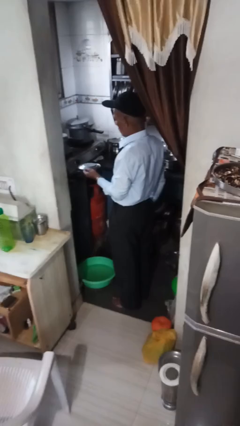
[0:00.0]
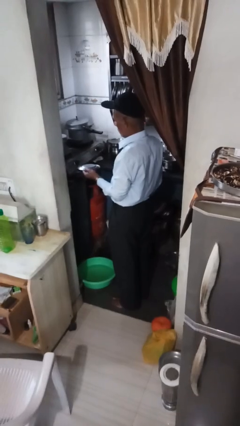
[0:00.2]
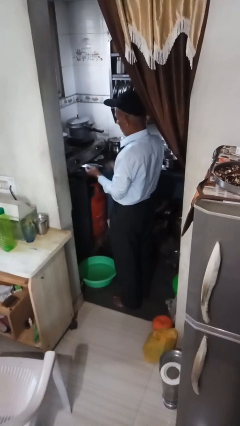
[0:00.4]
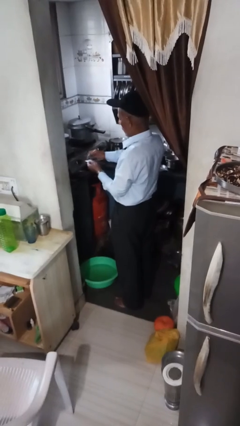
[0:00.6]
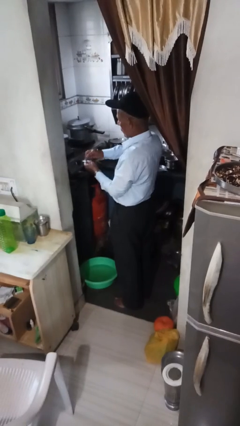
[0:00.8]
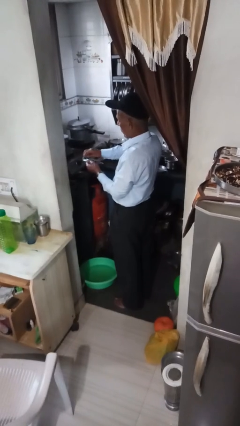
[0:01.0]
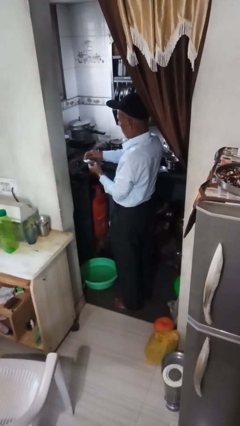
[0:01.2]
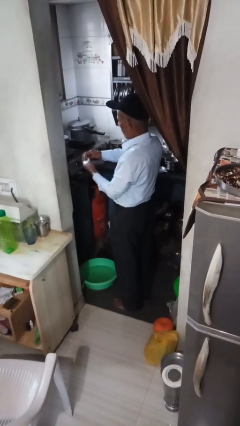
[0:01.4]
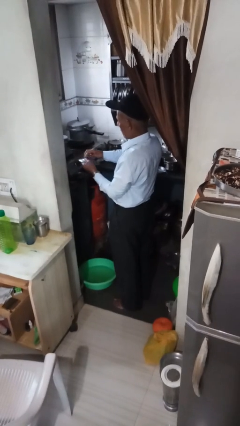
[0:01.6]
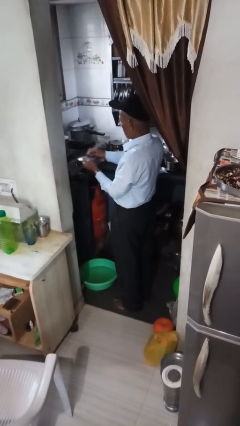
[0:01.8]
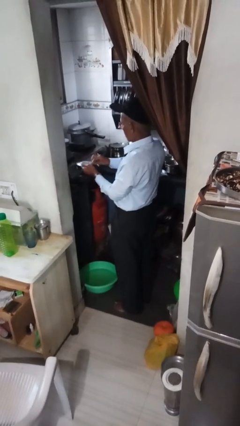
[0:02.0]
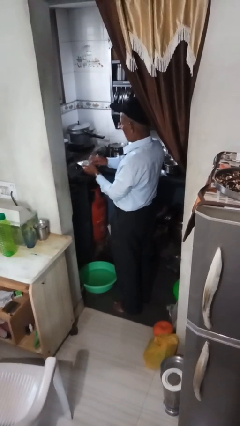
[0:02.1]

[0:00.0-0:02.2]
person washes dish

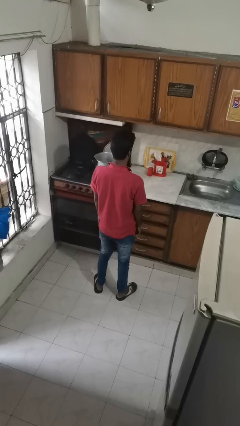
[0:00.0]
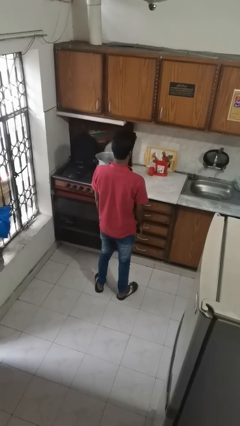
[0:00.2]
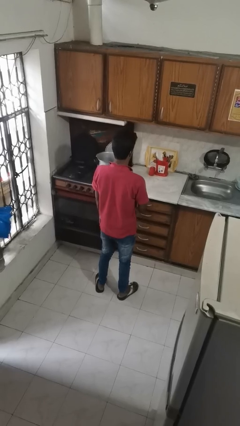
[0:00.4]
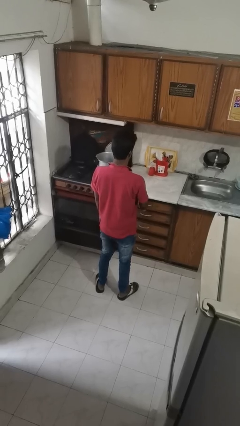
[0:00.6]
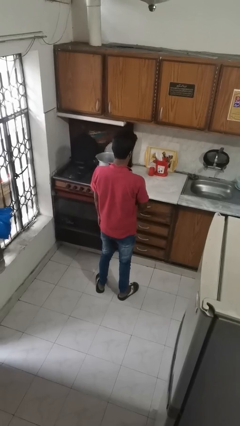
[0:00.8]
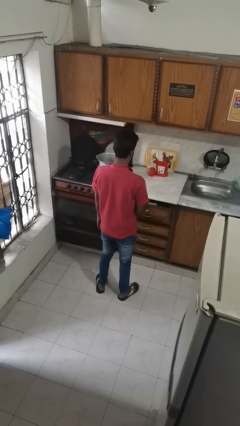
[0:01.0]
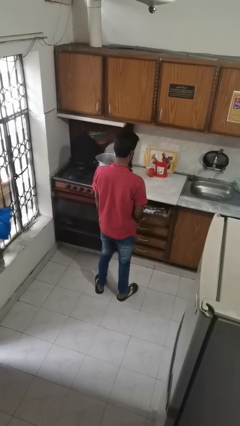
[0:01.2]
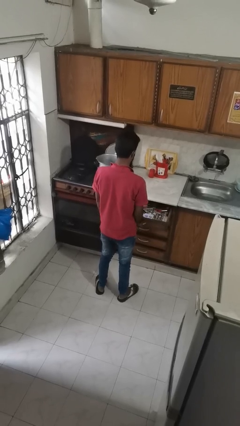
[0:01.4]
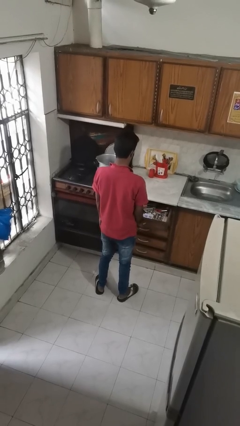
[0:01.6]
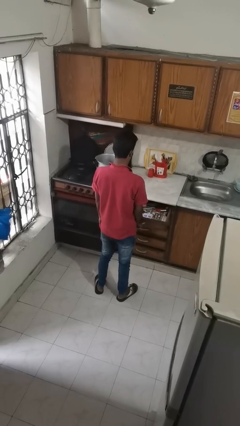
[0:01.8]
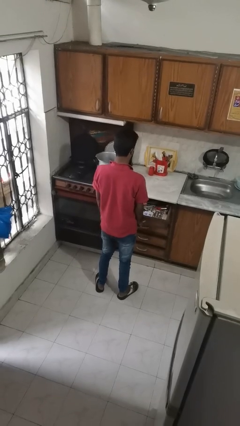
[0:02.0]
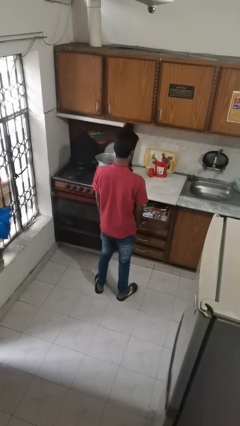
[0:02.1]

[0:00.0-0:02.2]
person opens kitchen drawer

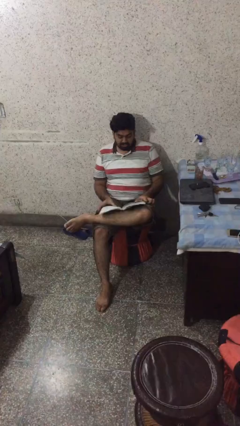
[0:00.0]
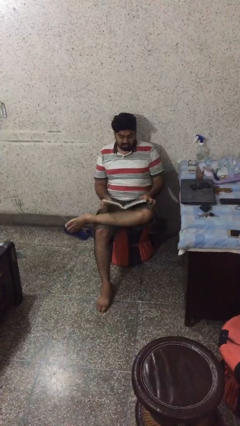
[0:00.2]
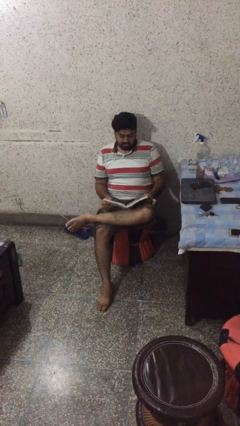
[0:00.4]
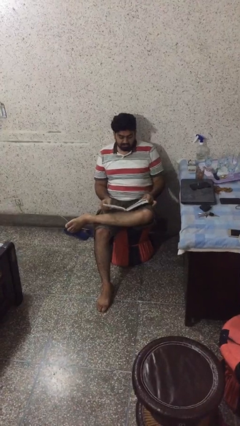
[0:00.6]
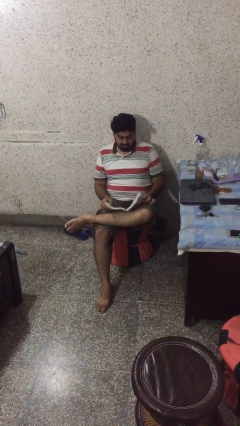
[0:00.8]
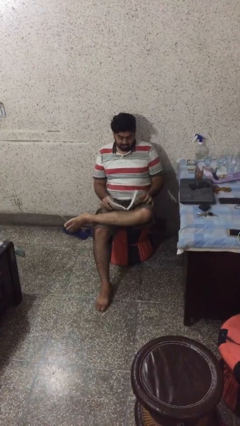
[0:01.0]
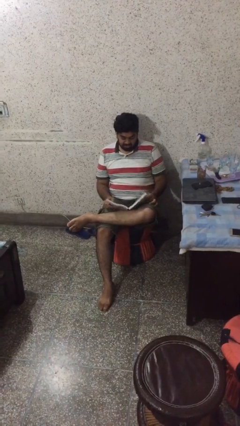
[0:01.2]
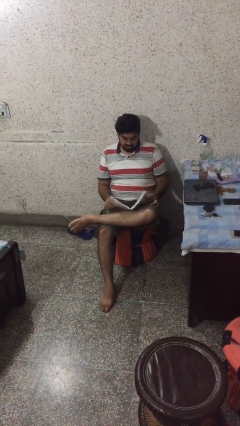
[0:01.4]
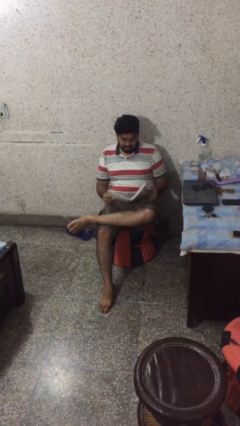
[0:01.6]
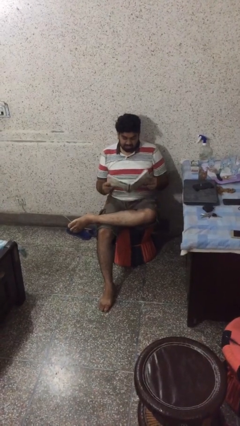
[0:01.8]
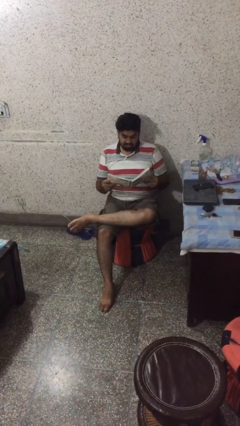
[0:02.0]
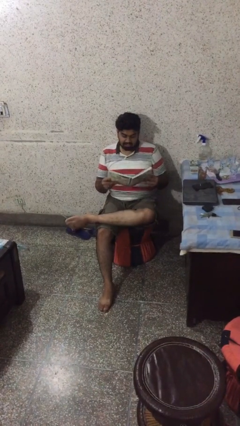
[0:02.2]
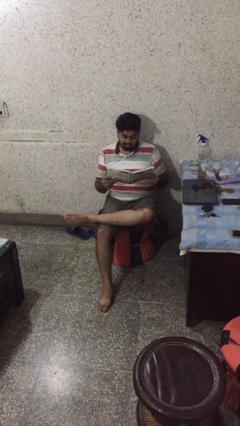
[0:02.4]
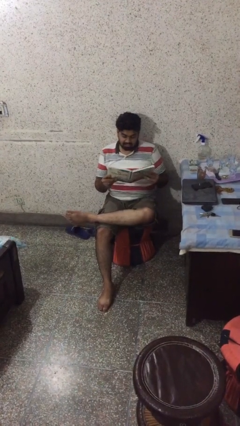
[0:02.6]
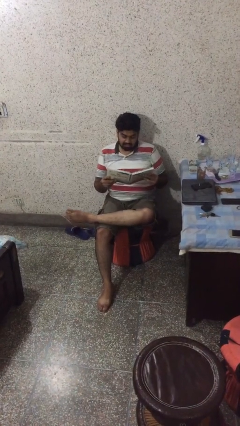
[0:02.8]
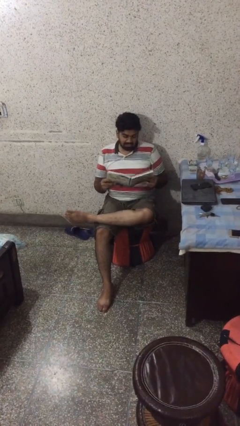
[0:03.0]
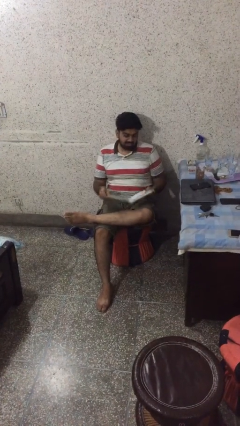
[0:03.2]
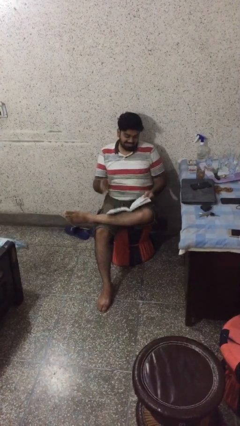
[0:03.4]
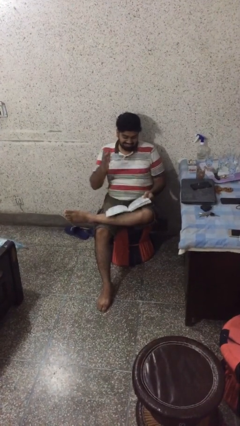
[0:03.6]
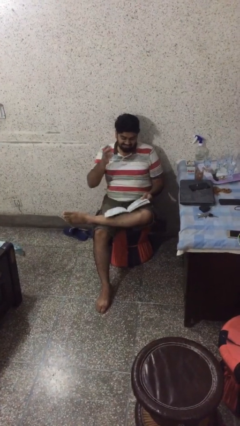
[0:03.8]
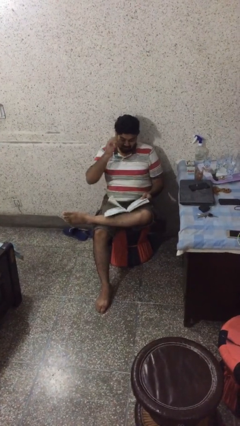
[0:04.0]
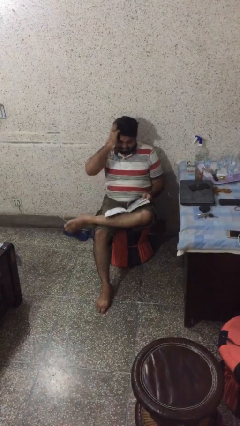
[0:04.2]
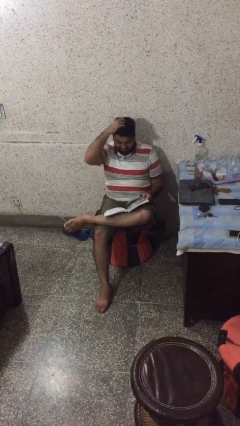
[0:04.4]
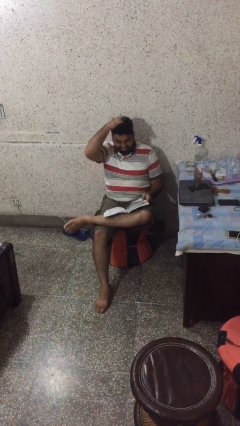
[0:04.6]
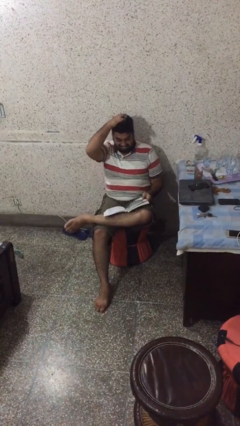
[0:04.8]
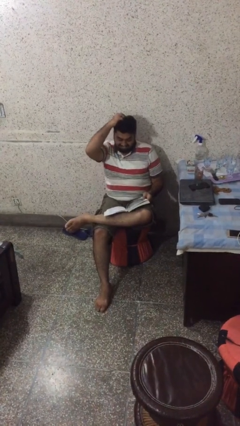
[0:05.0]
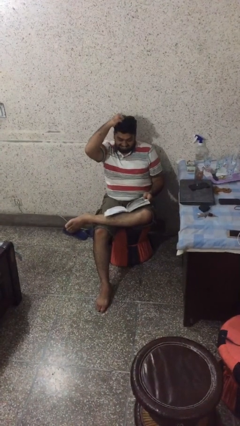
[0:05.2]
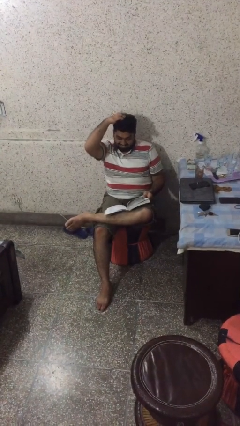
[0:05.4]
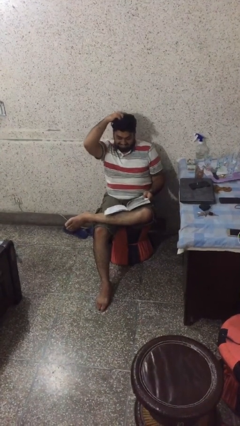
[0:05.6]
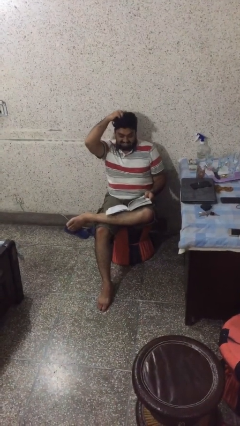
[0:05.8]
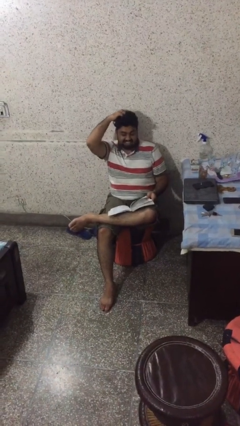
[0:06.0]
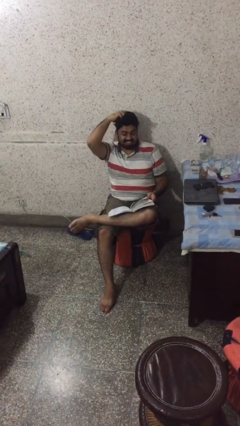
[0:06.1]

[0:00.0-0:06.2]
person reads document

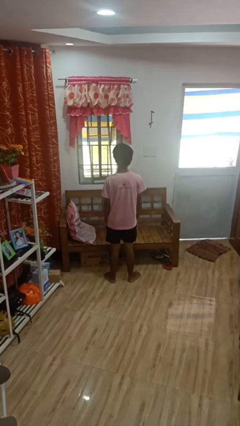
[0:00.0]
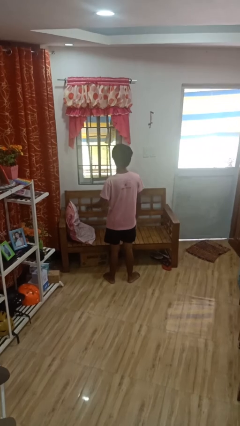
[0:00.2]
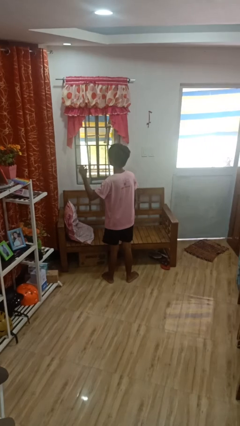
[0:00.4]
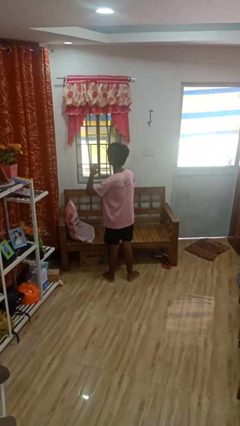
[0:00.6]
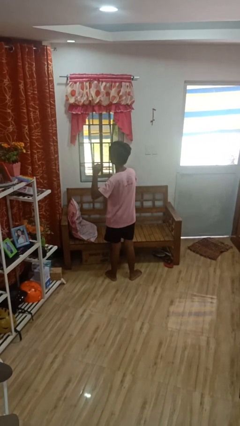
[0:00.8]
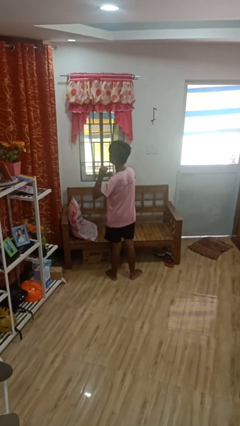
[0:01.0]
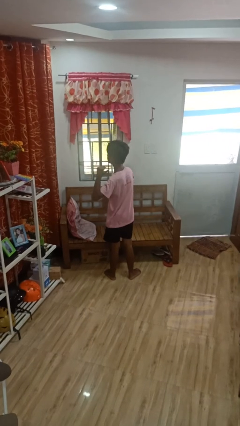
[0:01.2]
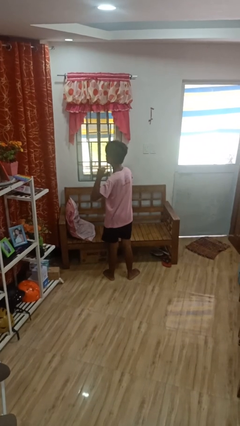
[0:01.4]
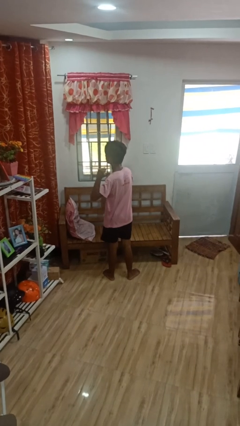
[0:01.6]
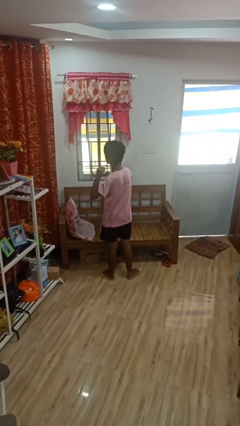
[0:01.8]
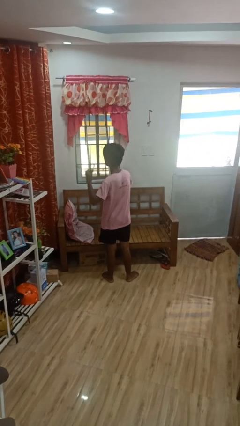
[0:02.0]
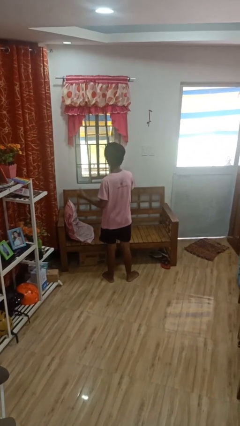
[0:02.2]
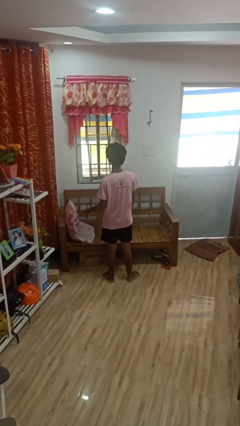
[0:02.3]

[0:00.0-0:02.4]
person gestures behind me

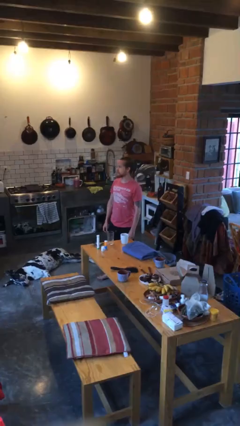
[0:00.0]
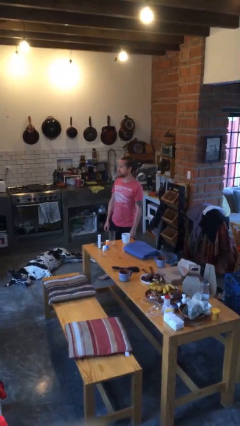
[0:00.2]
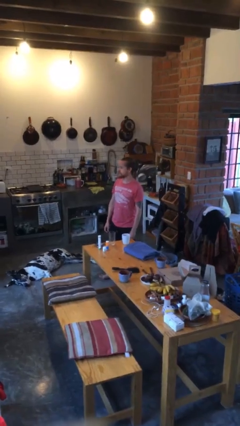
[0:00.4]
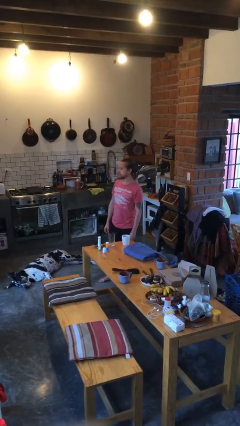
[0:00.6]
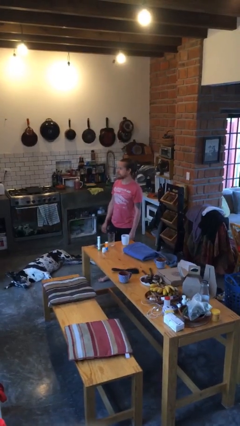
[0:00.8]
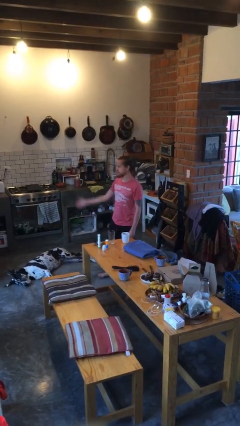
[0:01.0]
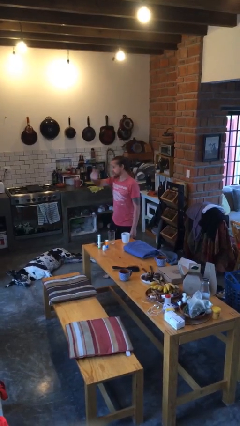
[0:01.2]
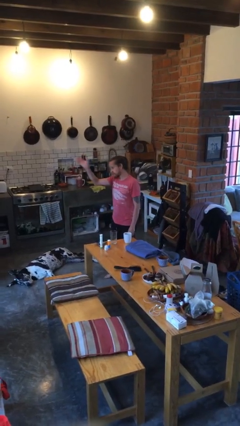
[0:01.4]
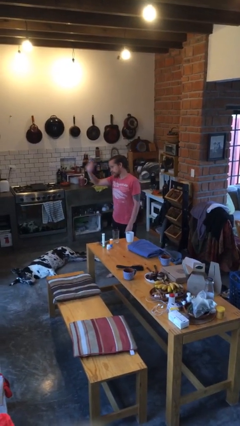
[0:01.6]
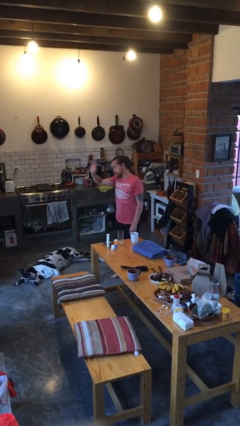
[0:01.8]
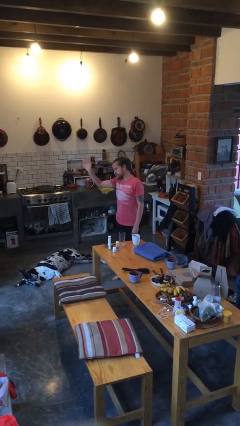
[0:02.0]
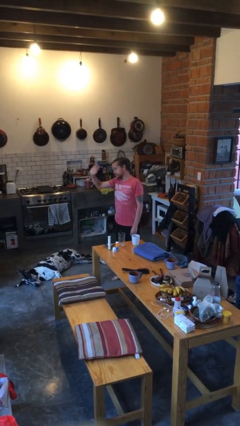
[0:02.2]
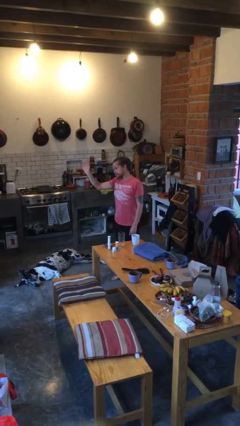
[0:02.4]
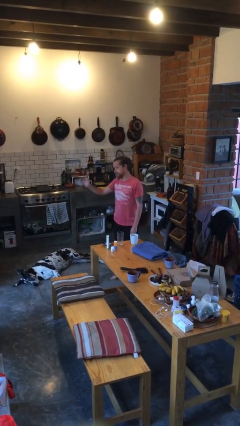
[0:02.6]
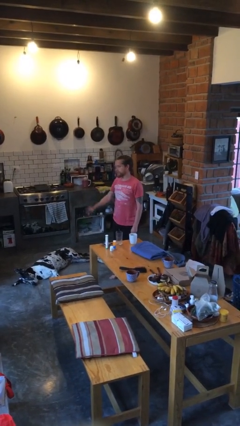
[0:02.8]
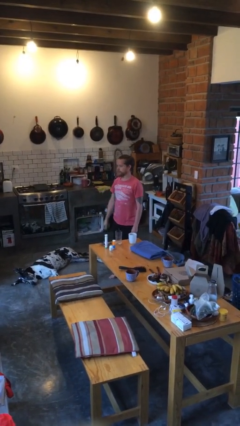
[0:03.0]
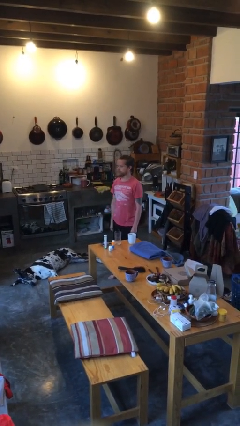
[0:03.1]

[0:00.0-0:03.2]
person waves at person

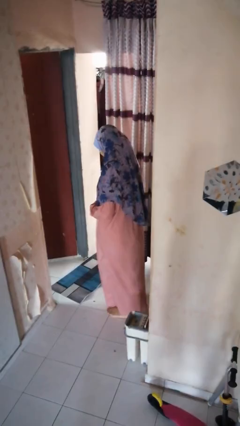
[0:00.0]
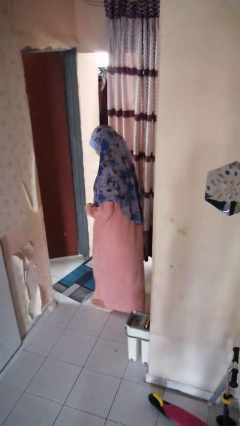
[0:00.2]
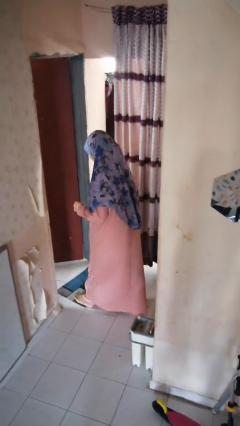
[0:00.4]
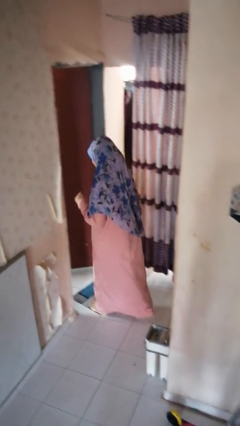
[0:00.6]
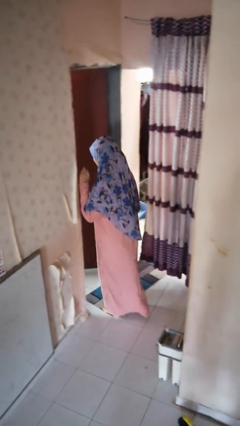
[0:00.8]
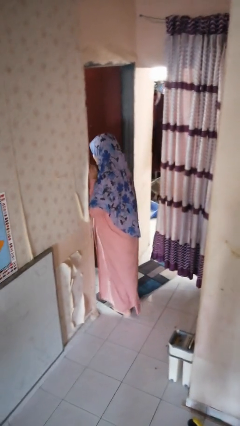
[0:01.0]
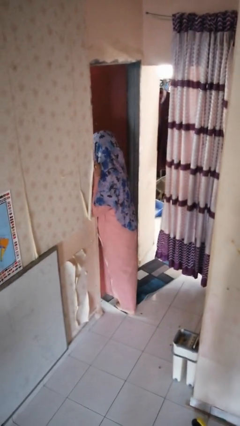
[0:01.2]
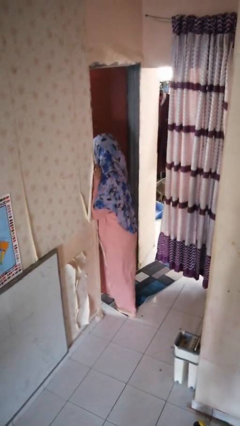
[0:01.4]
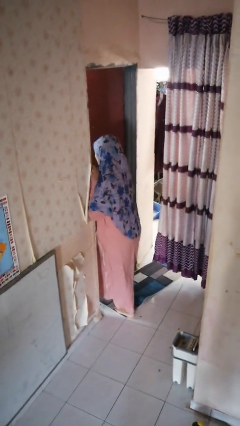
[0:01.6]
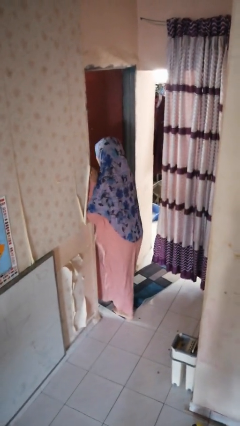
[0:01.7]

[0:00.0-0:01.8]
person bumps into wall
